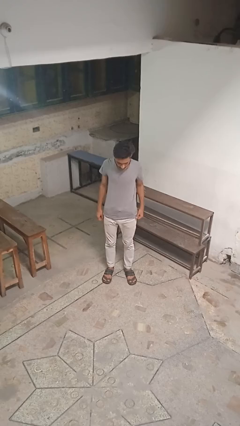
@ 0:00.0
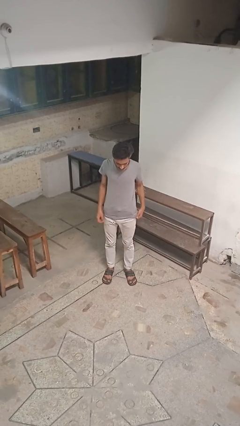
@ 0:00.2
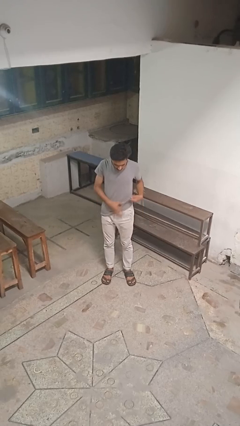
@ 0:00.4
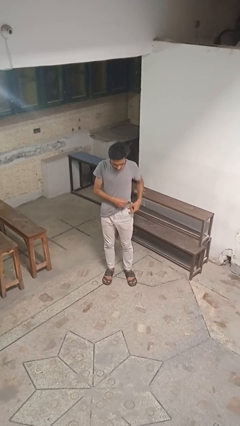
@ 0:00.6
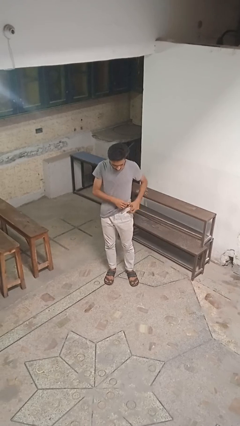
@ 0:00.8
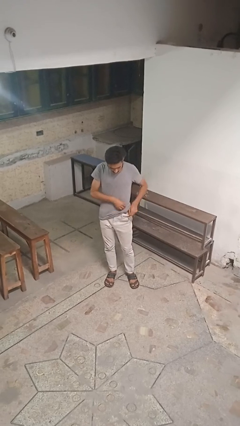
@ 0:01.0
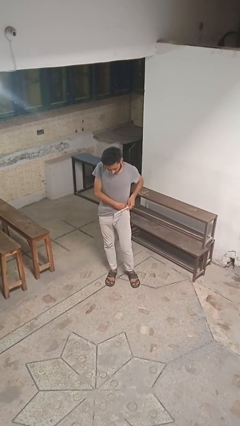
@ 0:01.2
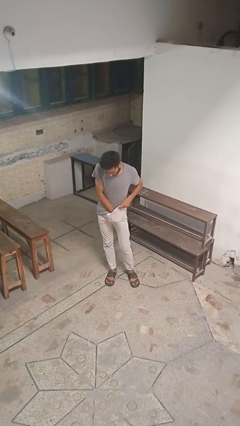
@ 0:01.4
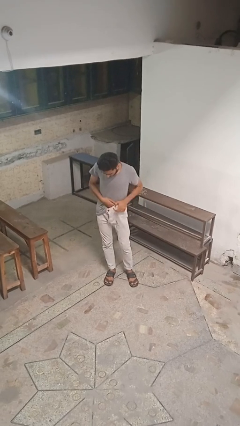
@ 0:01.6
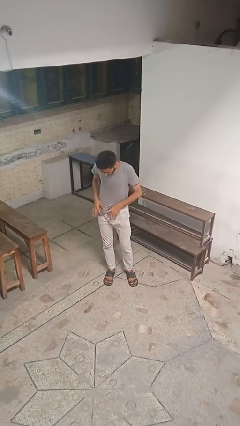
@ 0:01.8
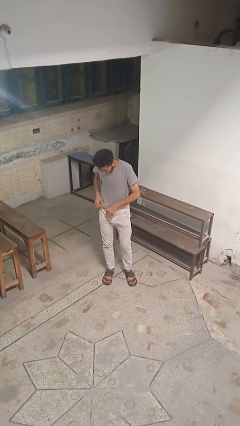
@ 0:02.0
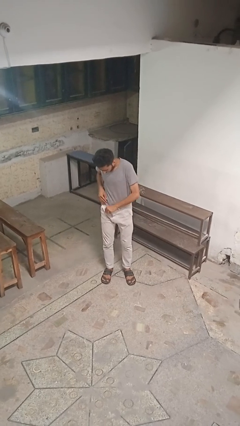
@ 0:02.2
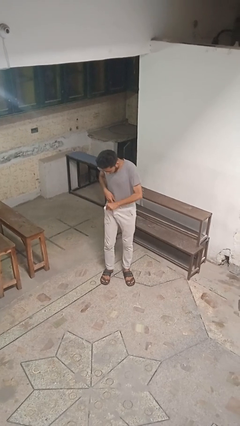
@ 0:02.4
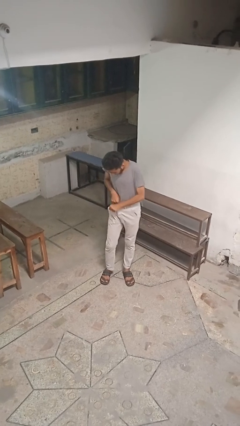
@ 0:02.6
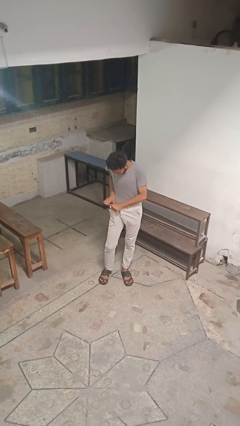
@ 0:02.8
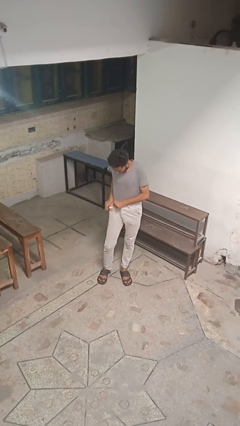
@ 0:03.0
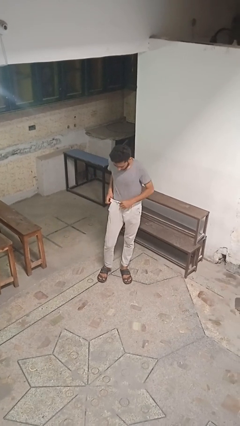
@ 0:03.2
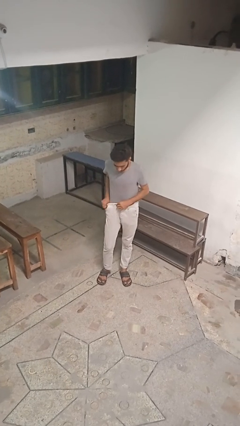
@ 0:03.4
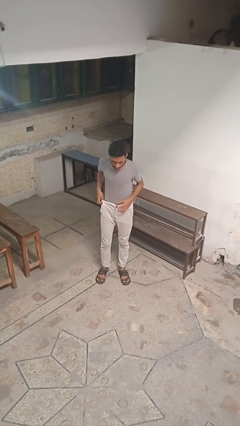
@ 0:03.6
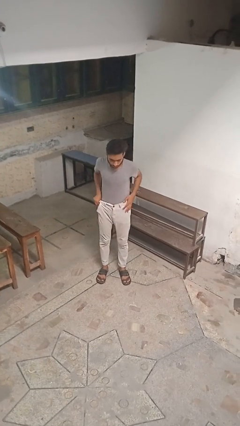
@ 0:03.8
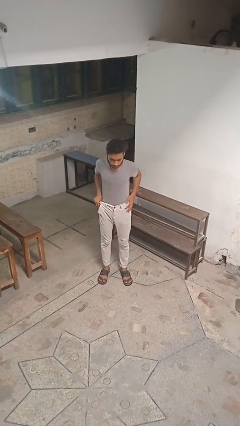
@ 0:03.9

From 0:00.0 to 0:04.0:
person tucks in shirt

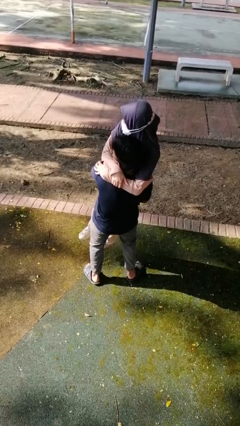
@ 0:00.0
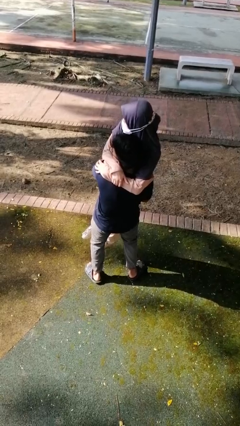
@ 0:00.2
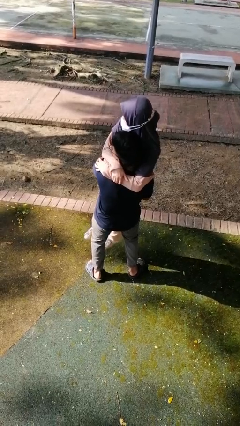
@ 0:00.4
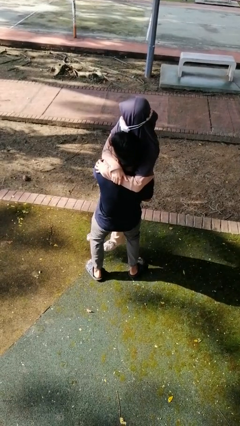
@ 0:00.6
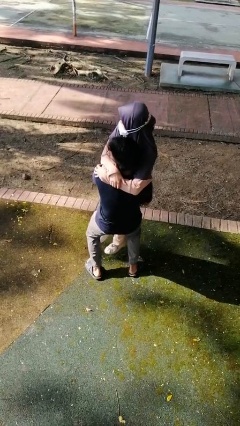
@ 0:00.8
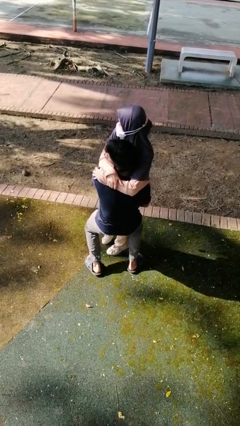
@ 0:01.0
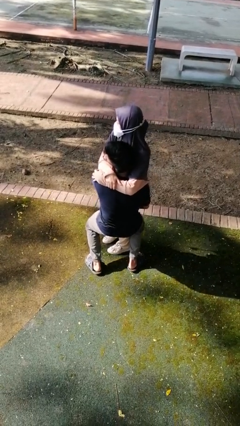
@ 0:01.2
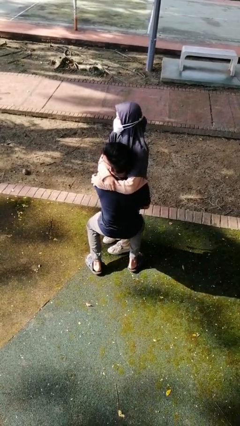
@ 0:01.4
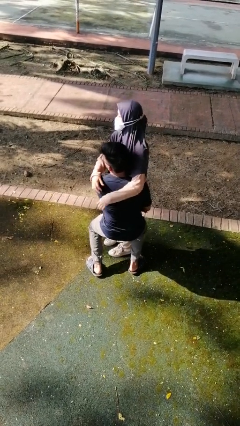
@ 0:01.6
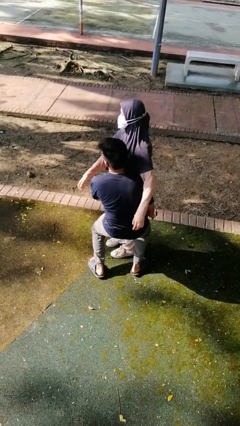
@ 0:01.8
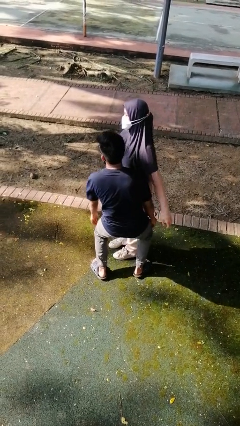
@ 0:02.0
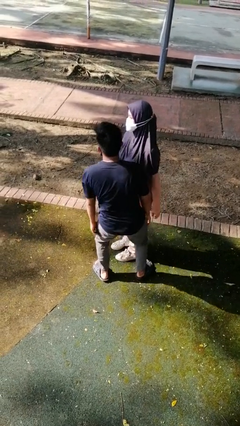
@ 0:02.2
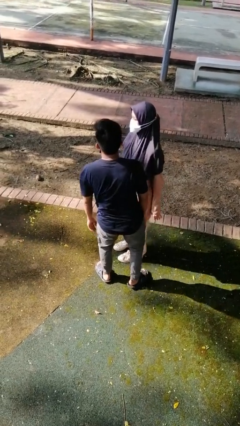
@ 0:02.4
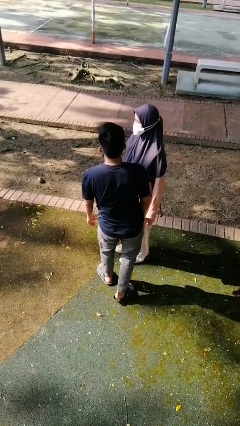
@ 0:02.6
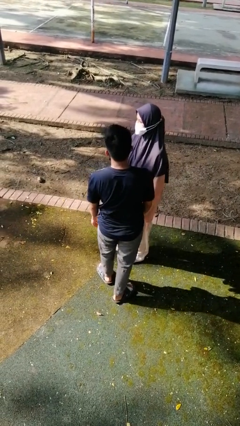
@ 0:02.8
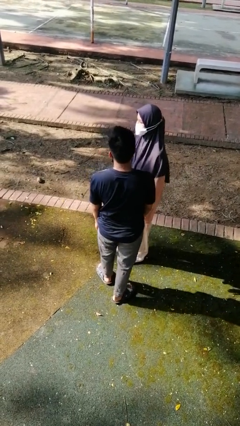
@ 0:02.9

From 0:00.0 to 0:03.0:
person puts down person

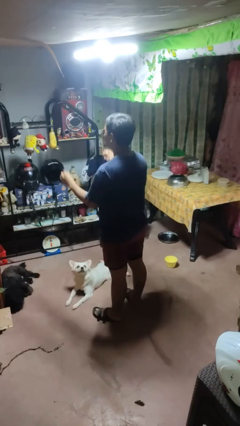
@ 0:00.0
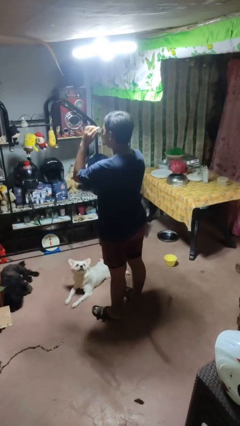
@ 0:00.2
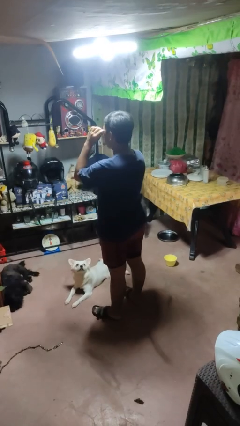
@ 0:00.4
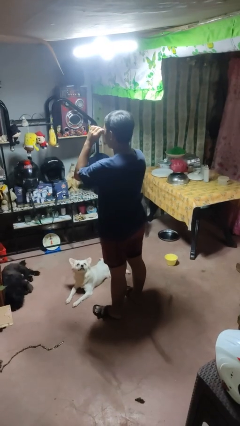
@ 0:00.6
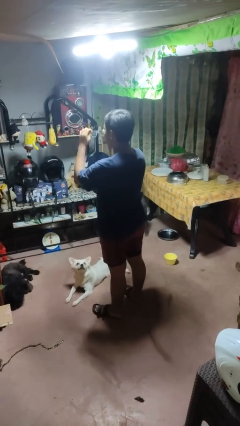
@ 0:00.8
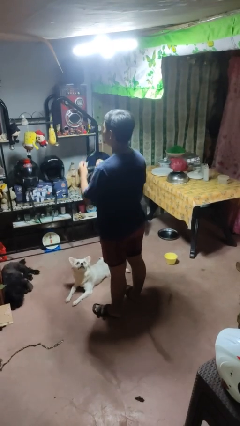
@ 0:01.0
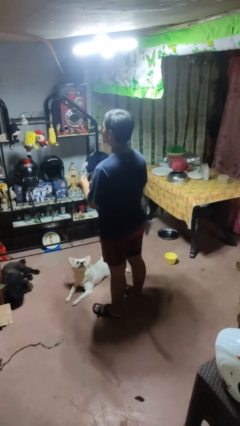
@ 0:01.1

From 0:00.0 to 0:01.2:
person takes off sunglasses

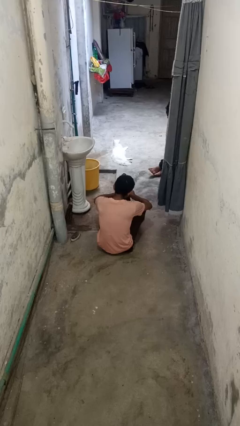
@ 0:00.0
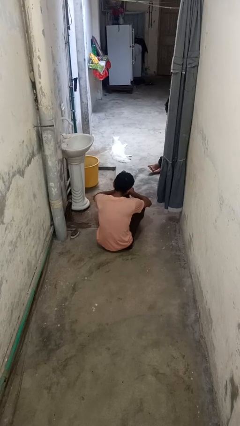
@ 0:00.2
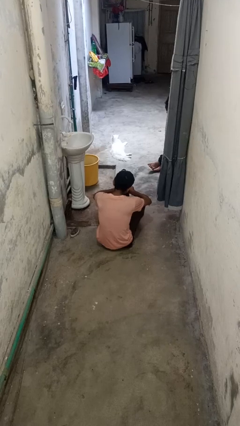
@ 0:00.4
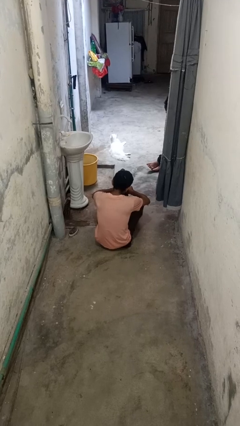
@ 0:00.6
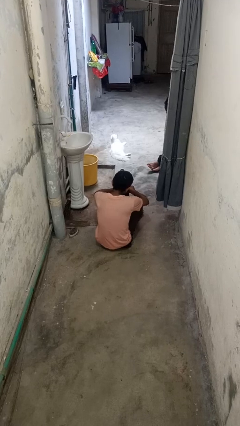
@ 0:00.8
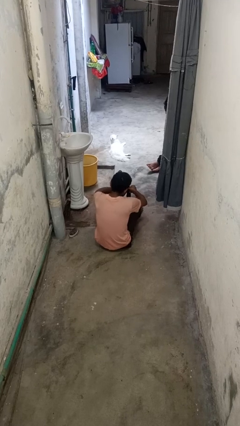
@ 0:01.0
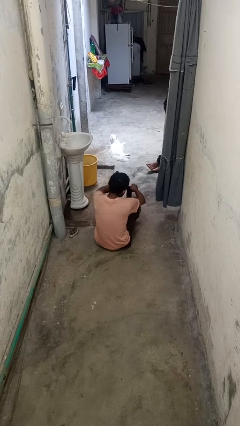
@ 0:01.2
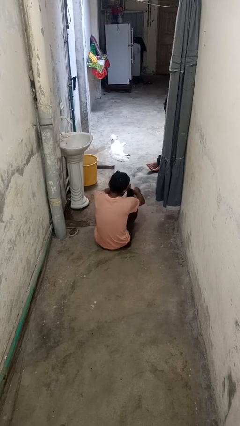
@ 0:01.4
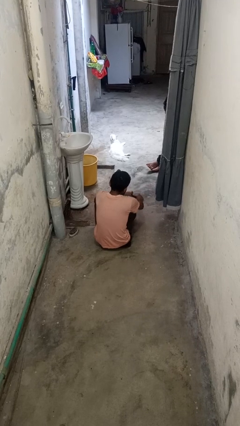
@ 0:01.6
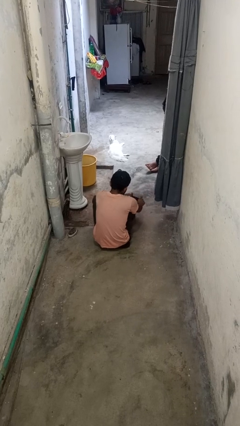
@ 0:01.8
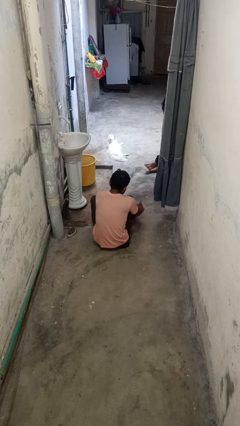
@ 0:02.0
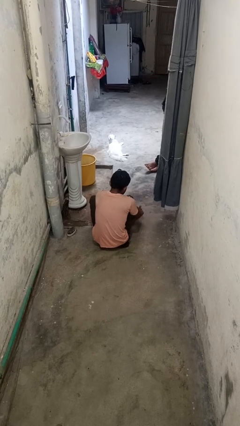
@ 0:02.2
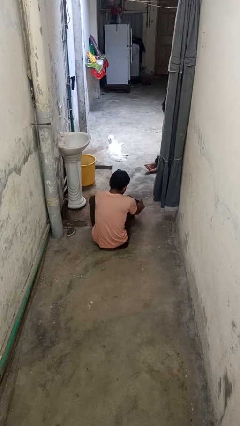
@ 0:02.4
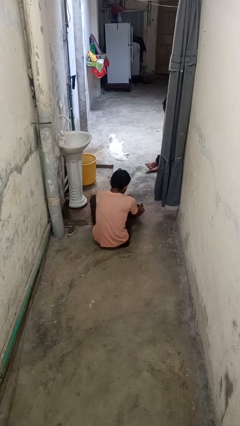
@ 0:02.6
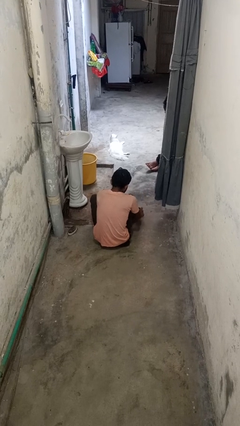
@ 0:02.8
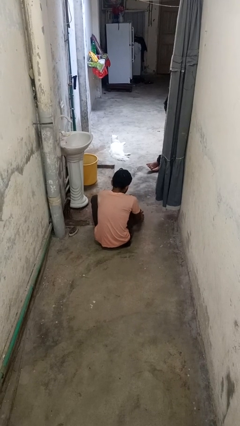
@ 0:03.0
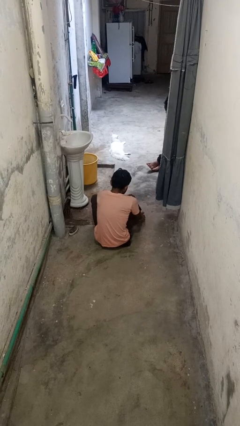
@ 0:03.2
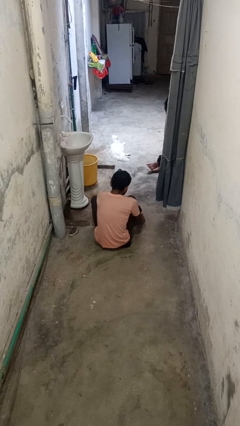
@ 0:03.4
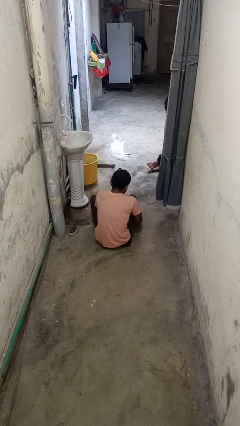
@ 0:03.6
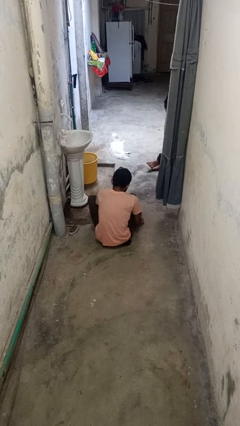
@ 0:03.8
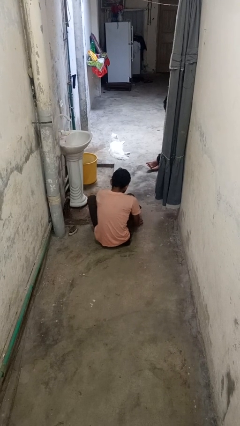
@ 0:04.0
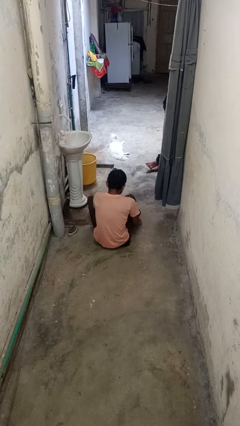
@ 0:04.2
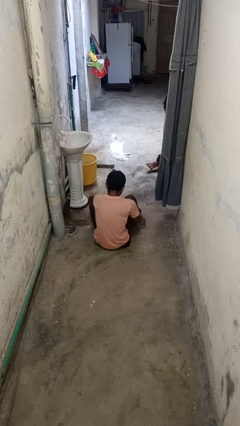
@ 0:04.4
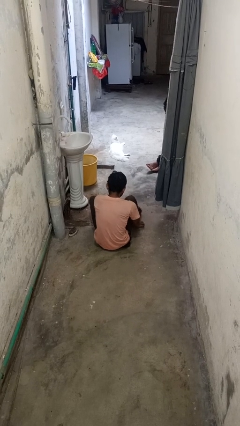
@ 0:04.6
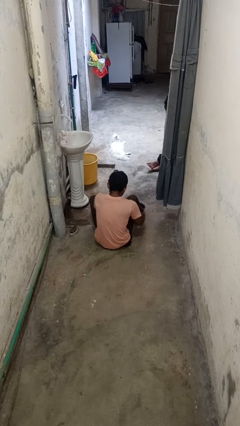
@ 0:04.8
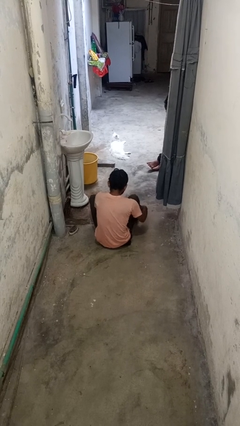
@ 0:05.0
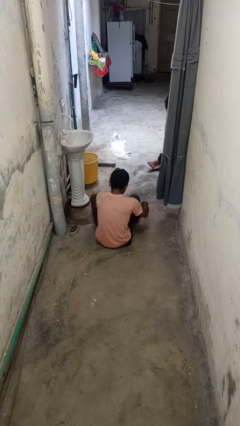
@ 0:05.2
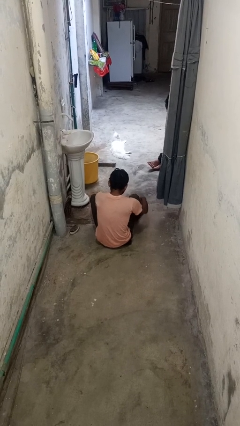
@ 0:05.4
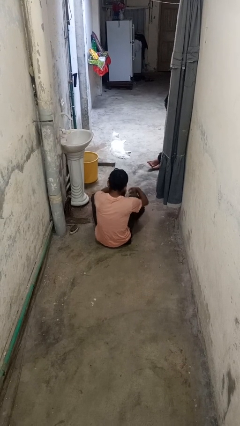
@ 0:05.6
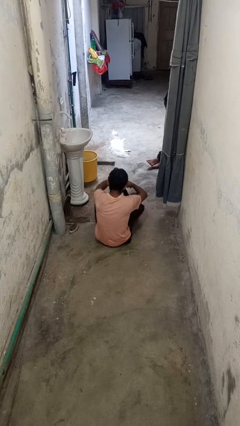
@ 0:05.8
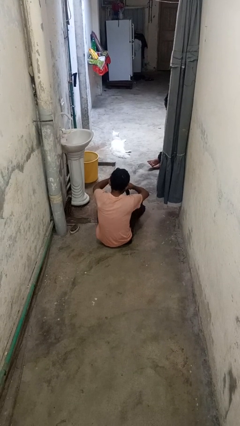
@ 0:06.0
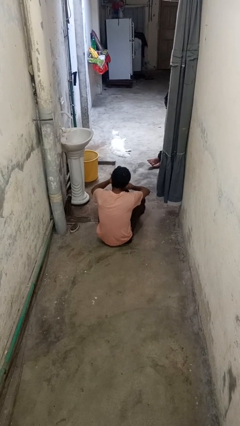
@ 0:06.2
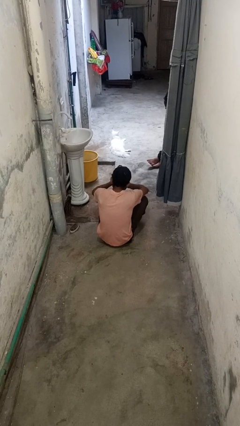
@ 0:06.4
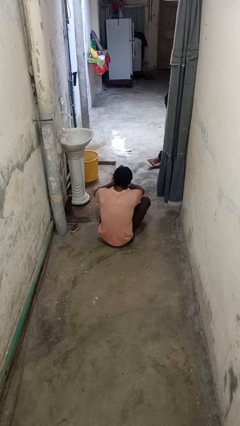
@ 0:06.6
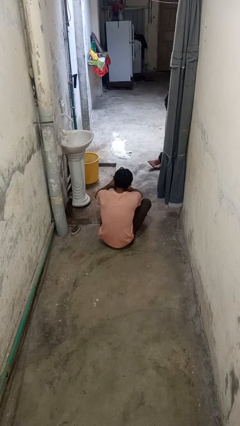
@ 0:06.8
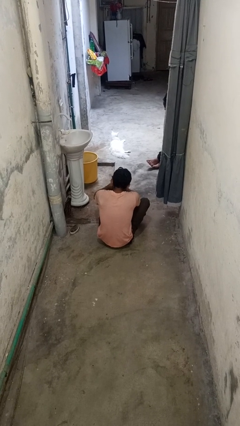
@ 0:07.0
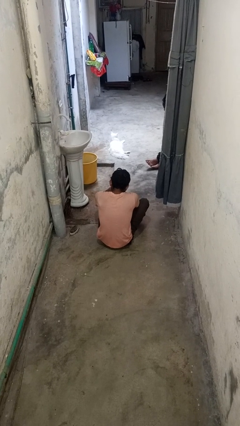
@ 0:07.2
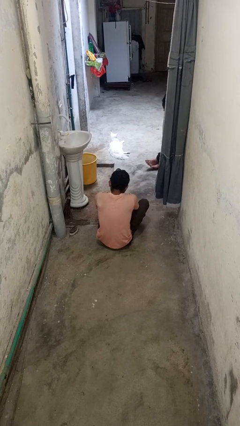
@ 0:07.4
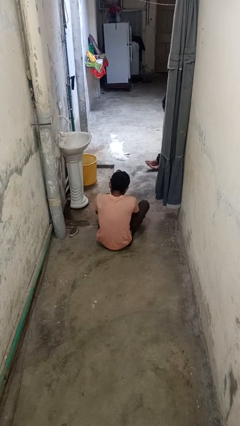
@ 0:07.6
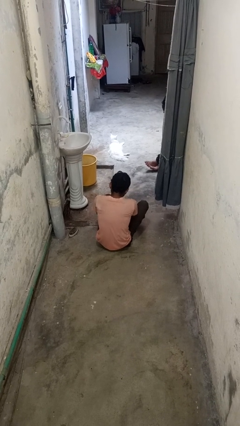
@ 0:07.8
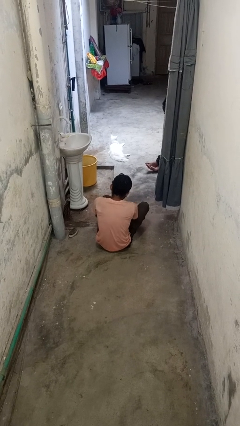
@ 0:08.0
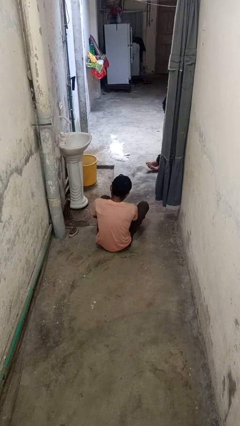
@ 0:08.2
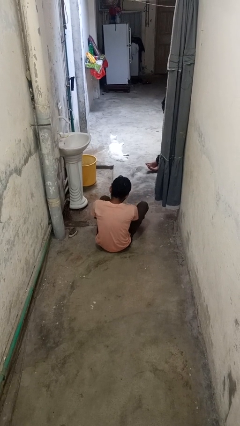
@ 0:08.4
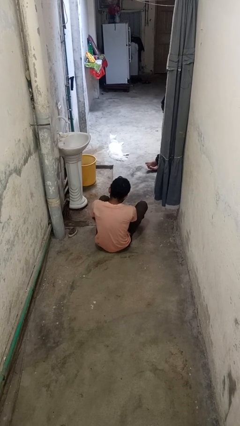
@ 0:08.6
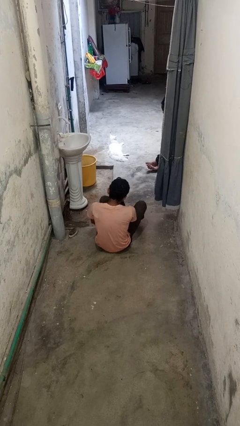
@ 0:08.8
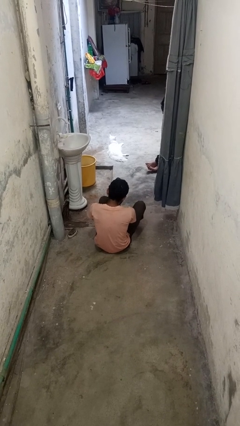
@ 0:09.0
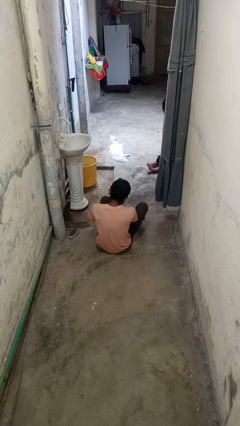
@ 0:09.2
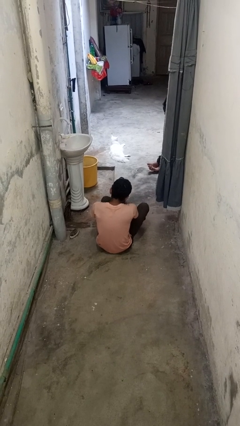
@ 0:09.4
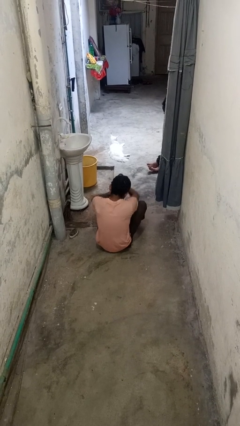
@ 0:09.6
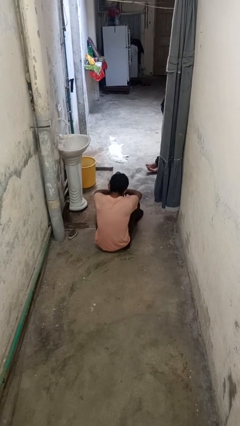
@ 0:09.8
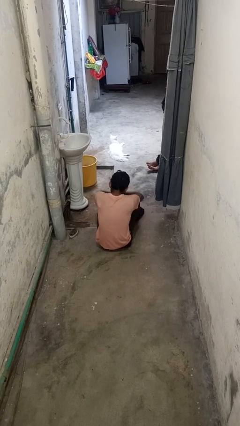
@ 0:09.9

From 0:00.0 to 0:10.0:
person puts on socks
